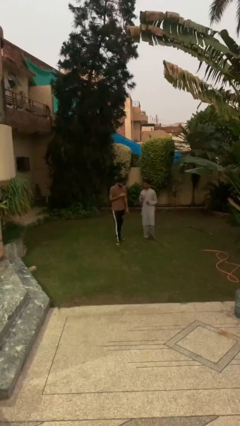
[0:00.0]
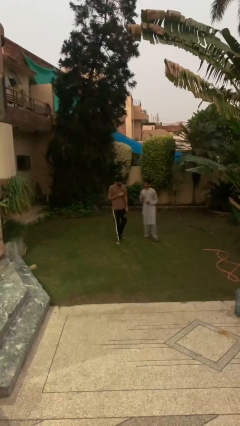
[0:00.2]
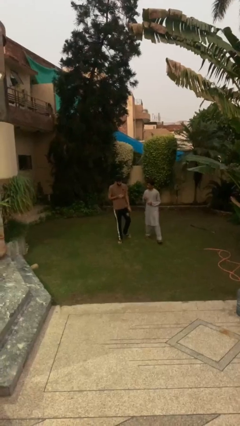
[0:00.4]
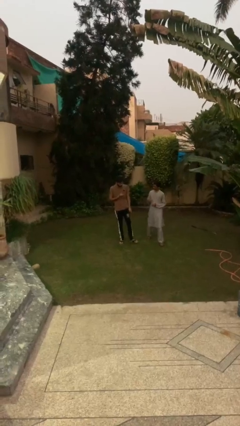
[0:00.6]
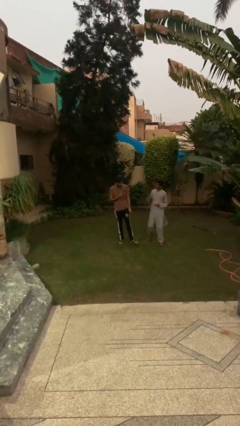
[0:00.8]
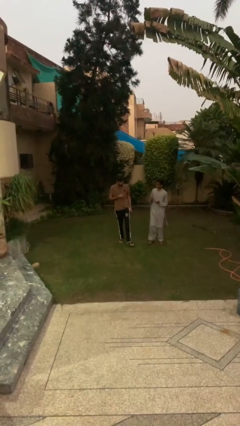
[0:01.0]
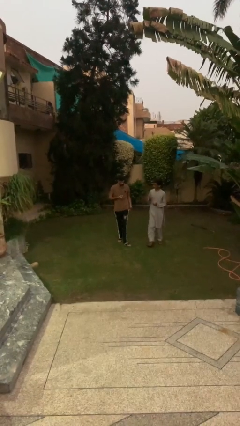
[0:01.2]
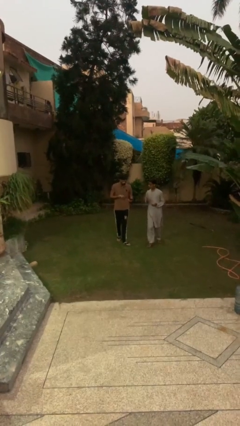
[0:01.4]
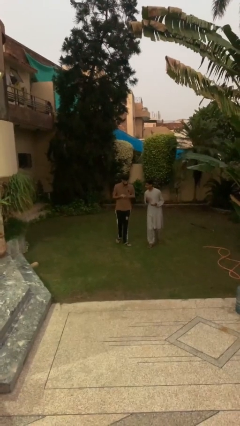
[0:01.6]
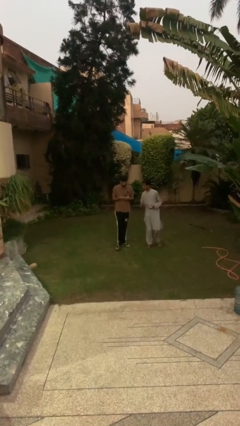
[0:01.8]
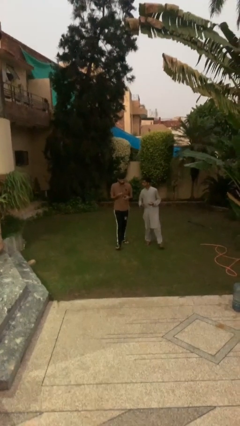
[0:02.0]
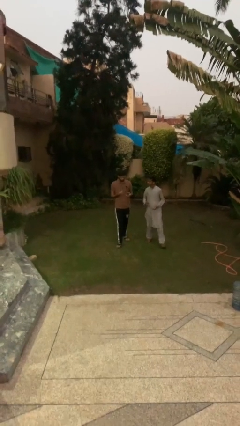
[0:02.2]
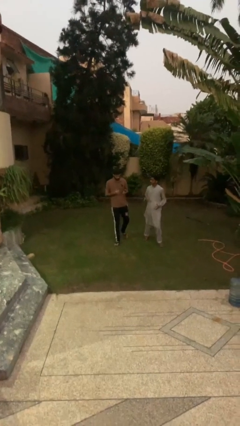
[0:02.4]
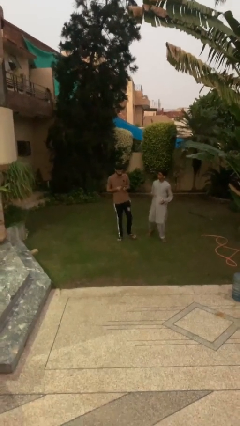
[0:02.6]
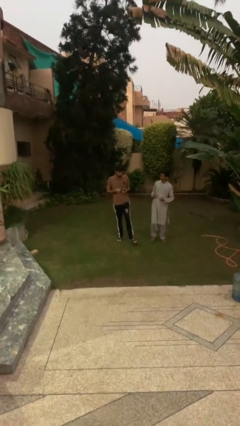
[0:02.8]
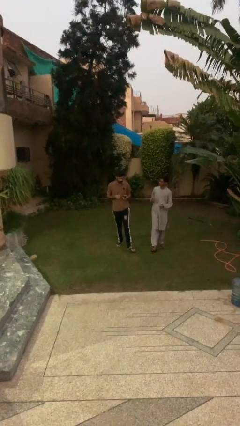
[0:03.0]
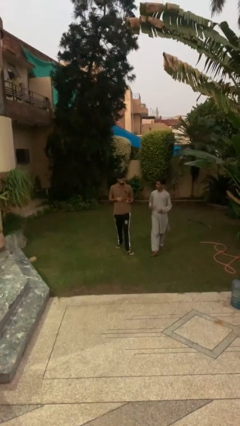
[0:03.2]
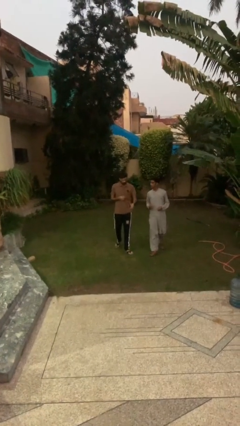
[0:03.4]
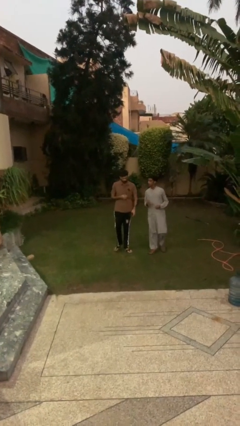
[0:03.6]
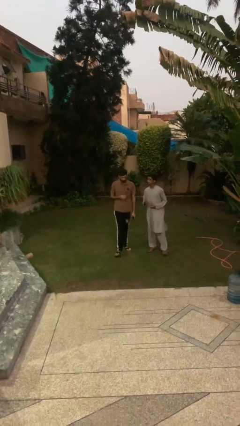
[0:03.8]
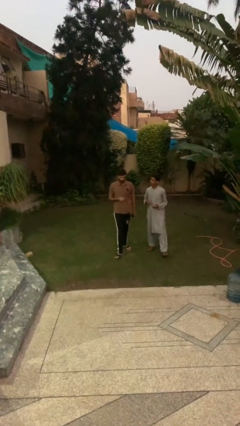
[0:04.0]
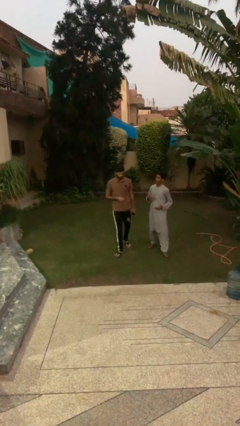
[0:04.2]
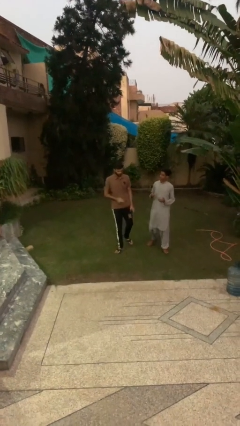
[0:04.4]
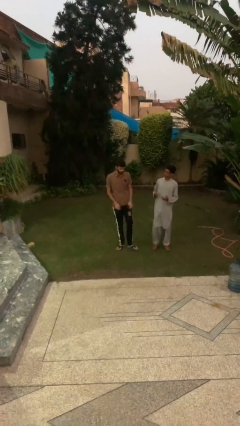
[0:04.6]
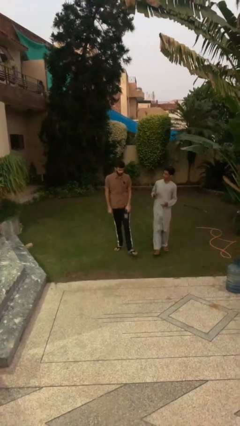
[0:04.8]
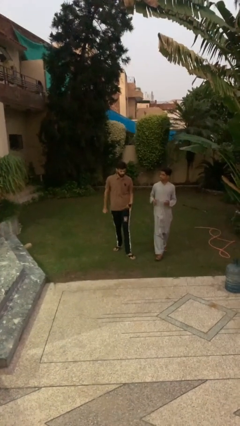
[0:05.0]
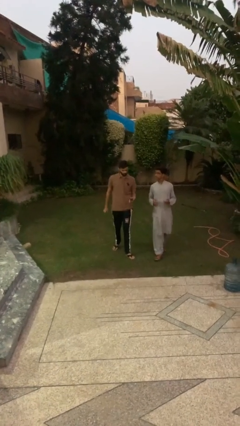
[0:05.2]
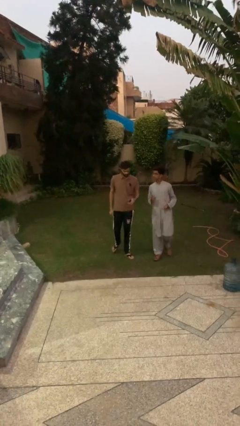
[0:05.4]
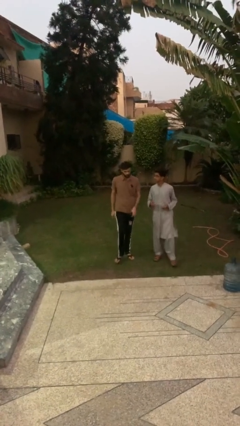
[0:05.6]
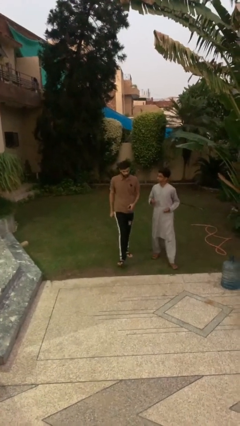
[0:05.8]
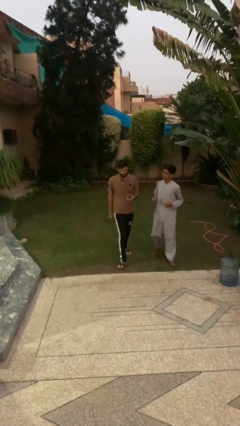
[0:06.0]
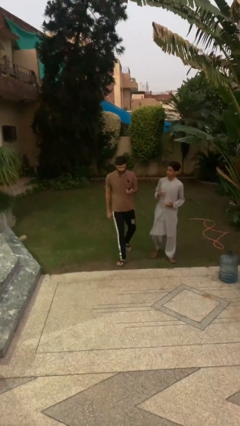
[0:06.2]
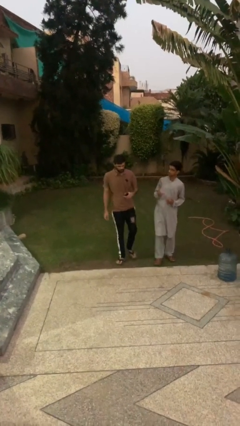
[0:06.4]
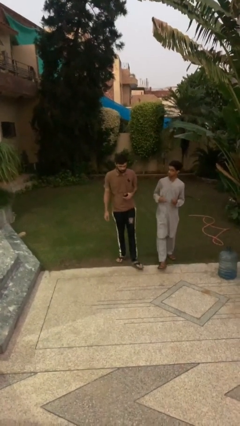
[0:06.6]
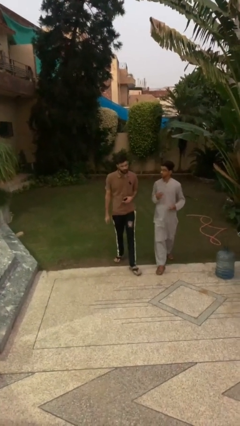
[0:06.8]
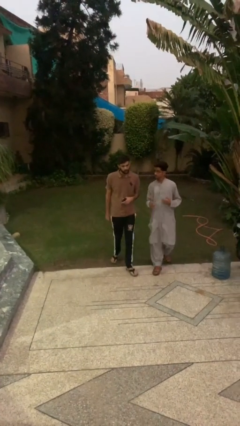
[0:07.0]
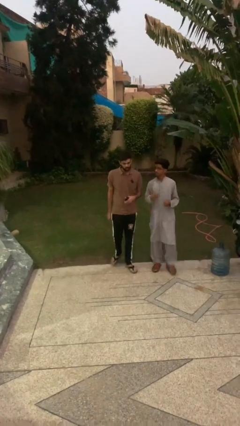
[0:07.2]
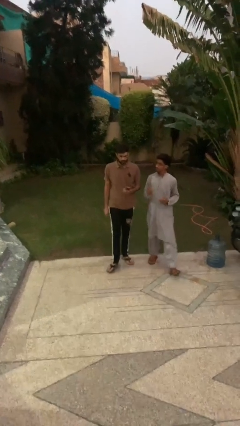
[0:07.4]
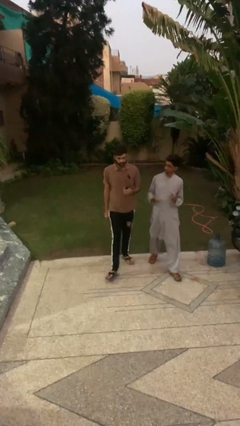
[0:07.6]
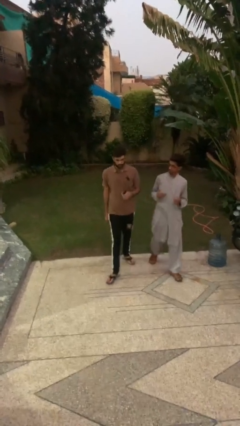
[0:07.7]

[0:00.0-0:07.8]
person talks to person

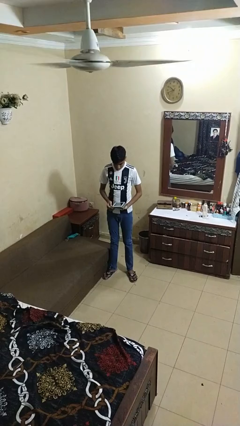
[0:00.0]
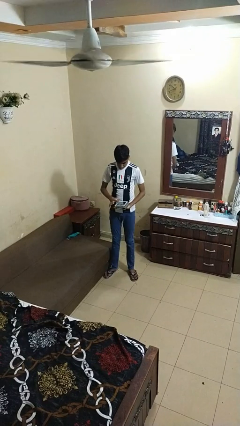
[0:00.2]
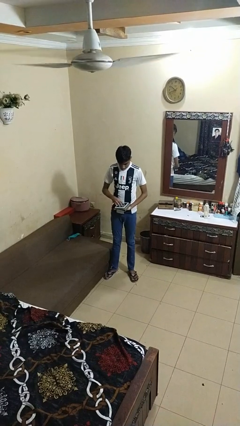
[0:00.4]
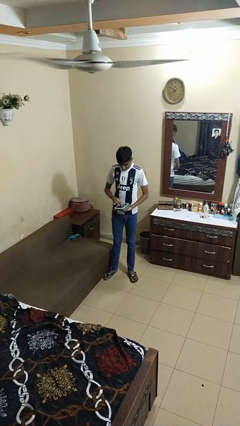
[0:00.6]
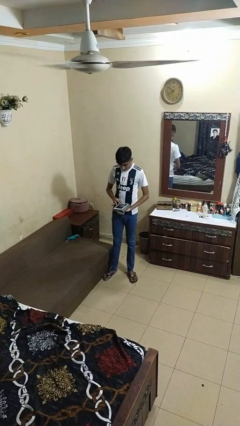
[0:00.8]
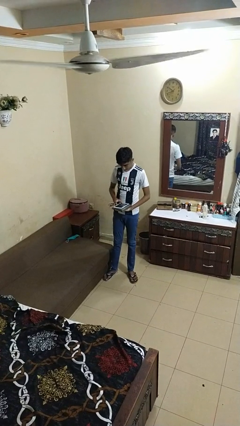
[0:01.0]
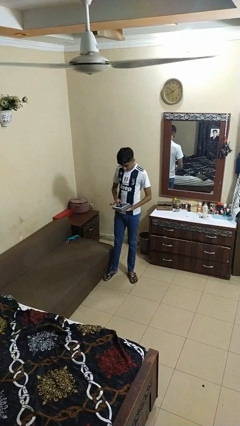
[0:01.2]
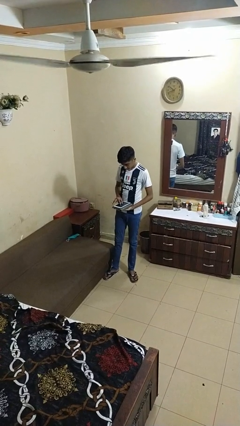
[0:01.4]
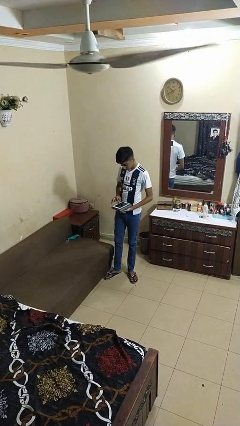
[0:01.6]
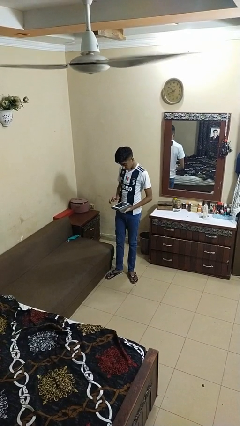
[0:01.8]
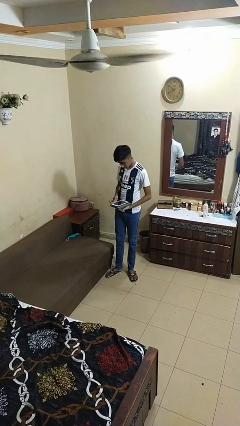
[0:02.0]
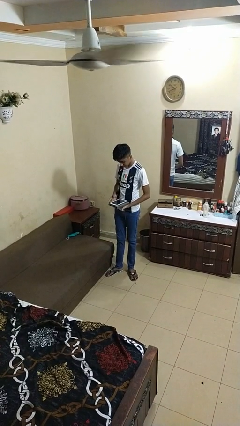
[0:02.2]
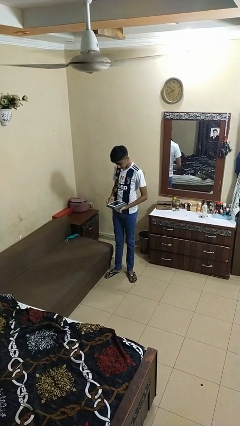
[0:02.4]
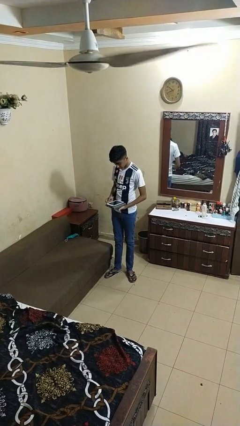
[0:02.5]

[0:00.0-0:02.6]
person gestures zoom out

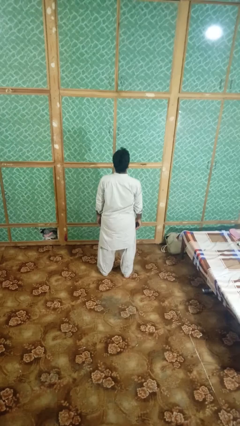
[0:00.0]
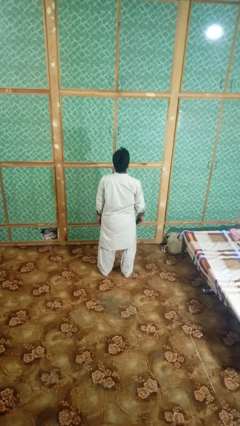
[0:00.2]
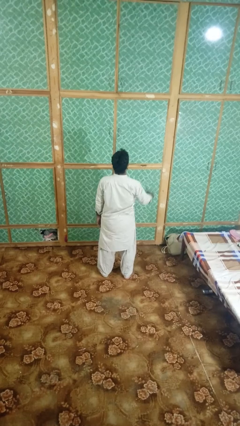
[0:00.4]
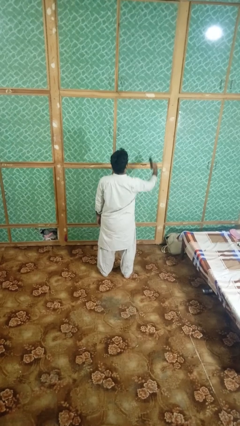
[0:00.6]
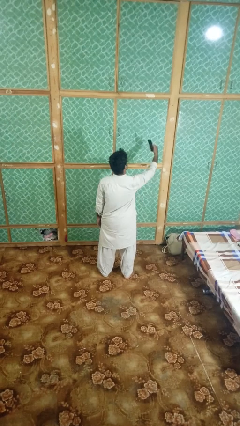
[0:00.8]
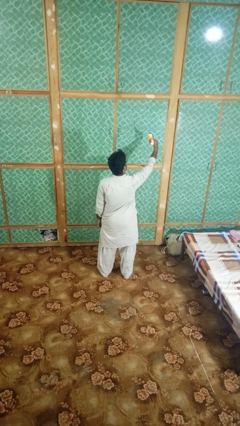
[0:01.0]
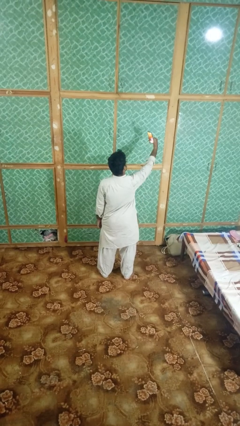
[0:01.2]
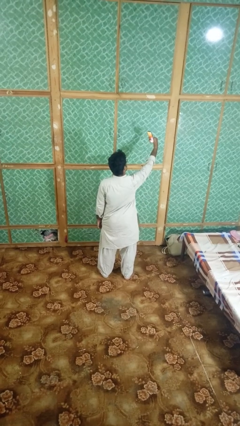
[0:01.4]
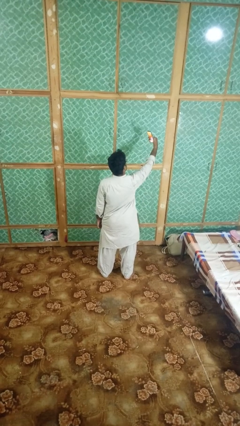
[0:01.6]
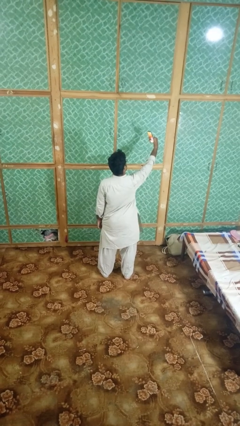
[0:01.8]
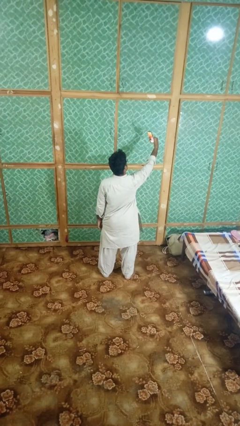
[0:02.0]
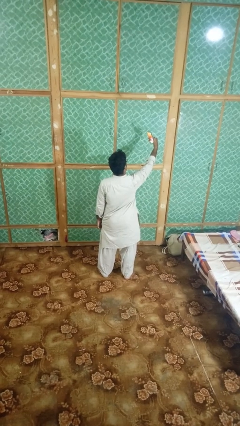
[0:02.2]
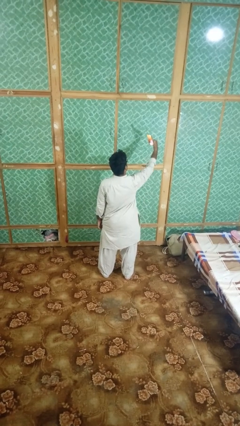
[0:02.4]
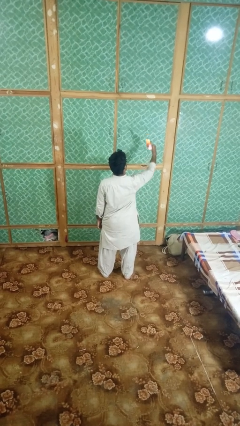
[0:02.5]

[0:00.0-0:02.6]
person takes selfie

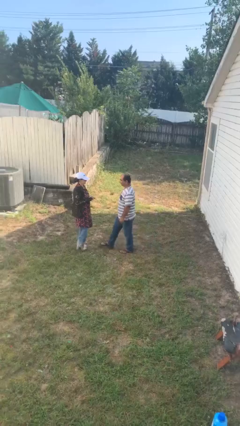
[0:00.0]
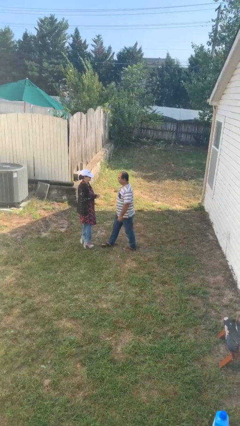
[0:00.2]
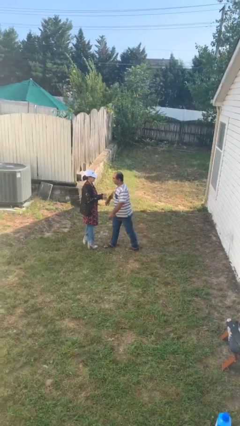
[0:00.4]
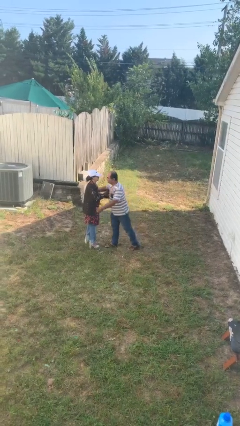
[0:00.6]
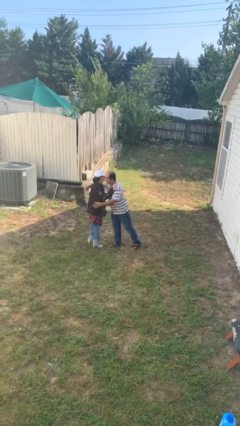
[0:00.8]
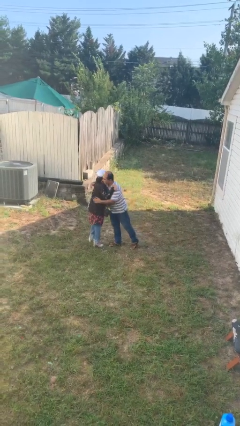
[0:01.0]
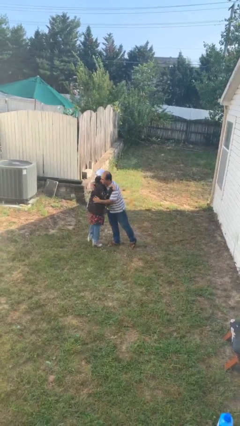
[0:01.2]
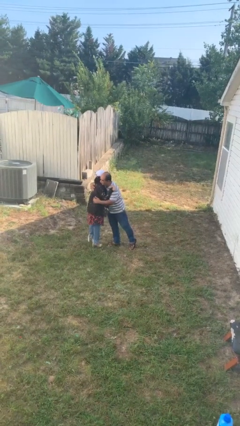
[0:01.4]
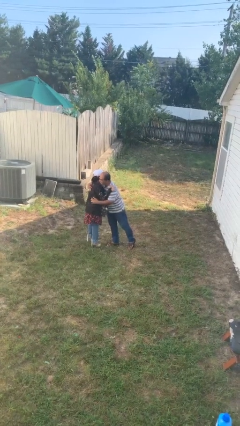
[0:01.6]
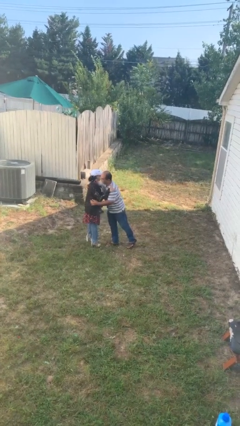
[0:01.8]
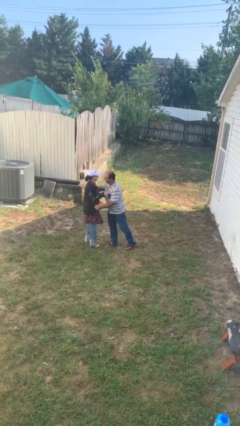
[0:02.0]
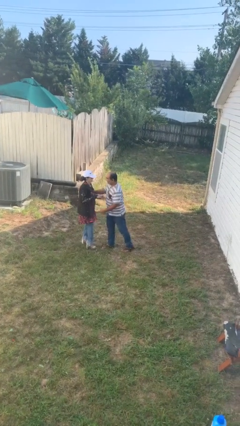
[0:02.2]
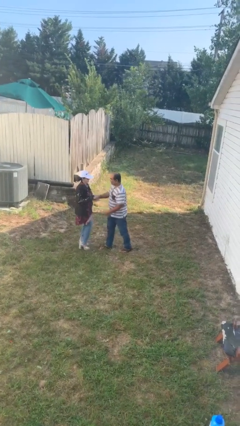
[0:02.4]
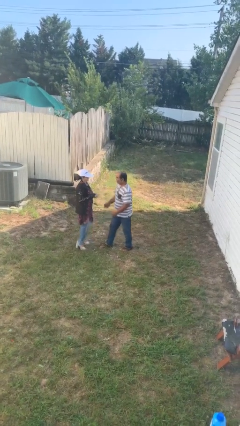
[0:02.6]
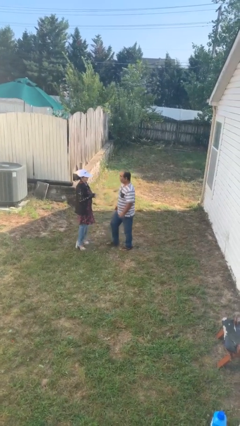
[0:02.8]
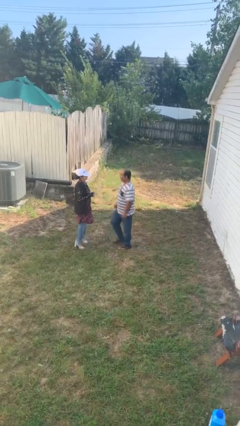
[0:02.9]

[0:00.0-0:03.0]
person embraces person

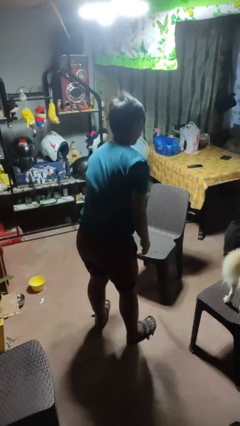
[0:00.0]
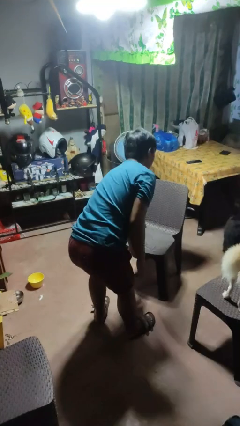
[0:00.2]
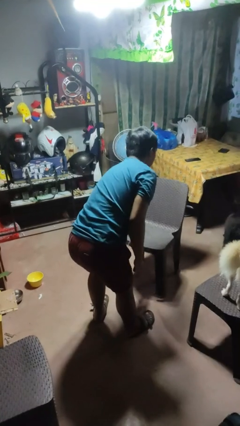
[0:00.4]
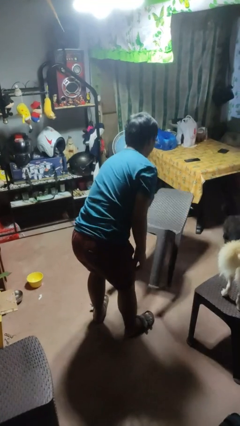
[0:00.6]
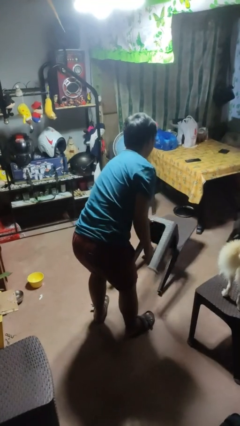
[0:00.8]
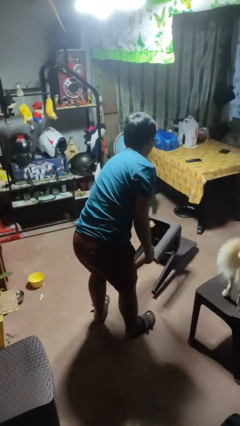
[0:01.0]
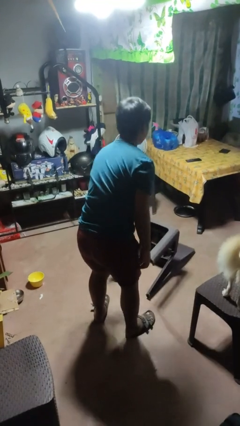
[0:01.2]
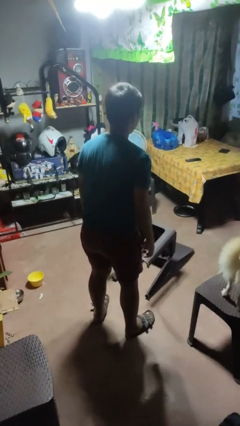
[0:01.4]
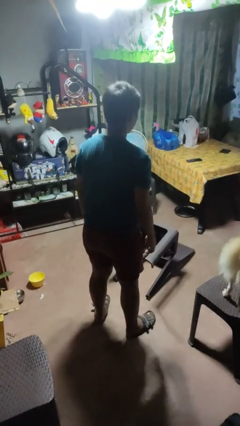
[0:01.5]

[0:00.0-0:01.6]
person knocks over furniture

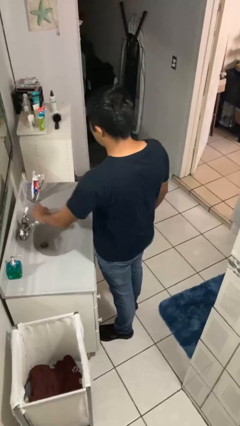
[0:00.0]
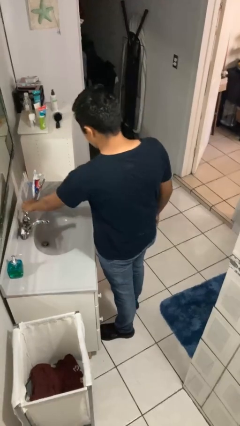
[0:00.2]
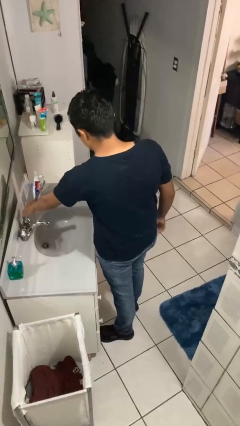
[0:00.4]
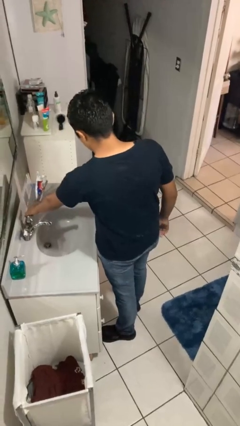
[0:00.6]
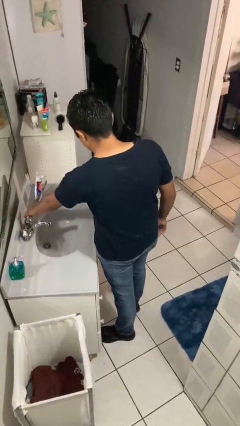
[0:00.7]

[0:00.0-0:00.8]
person turns on faucet
